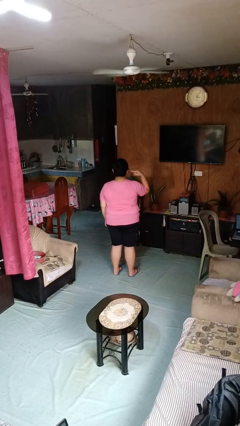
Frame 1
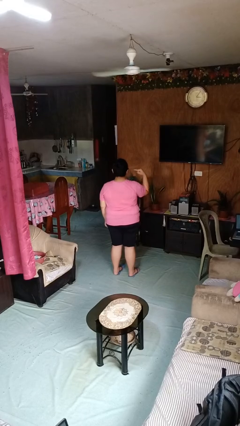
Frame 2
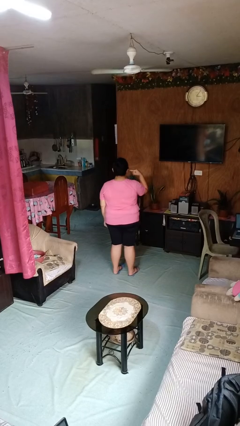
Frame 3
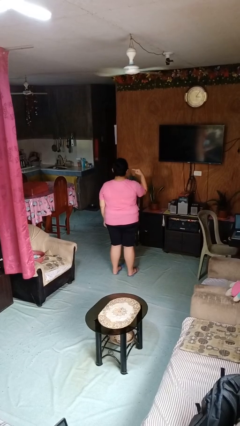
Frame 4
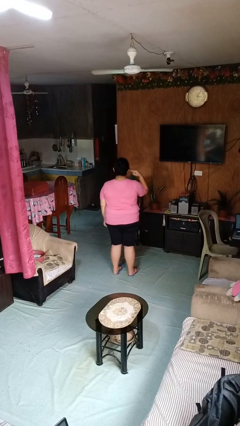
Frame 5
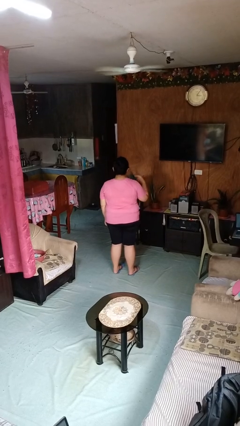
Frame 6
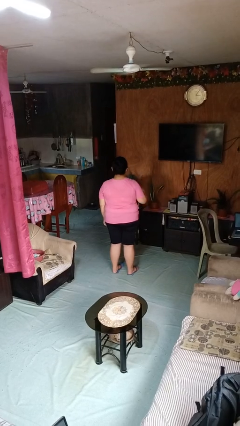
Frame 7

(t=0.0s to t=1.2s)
person gestures listen closely

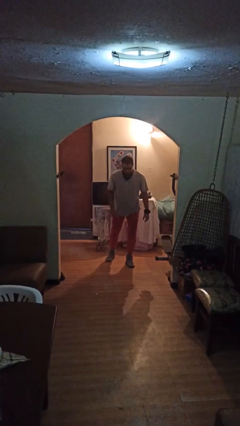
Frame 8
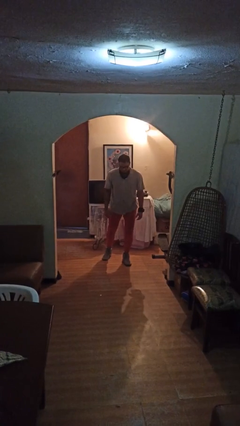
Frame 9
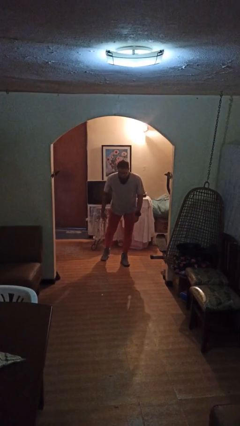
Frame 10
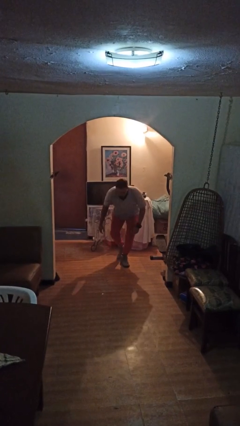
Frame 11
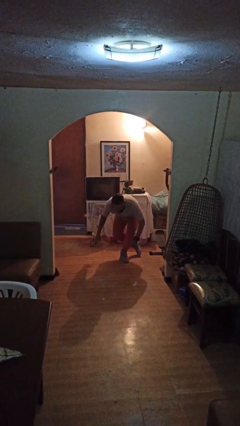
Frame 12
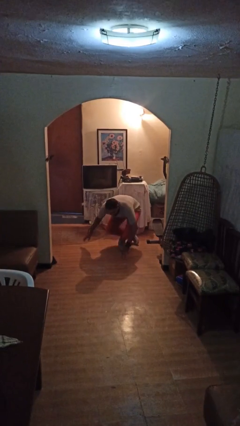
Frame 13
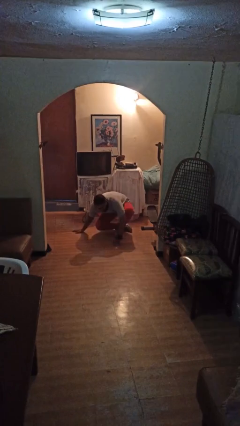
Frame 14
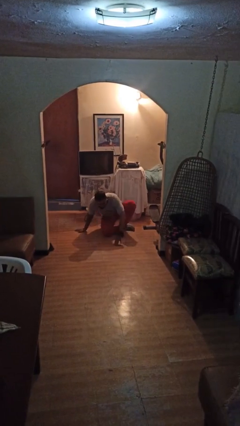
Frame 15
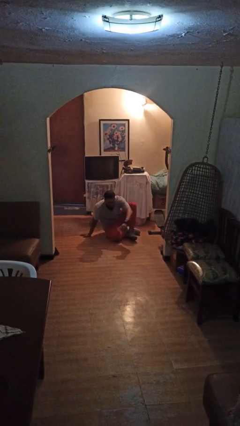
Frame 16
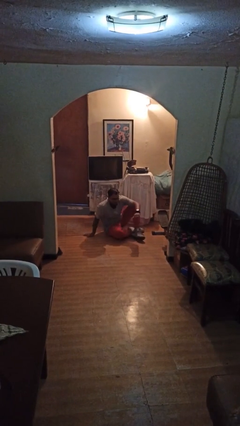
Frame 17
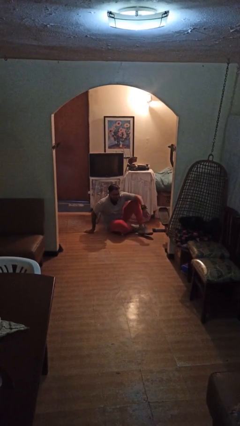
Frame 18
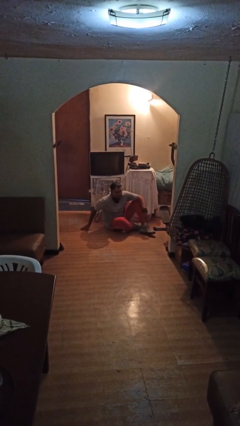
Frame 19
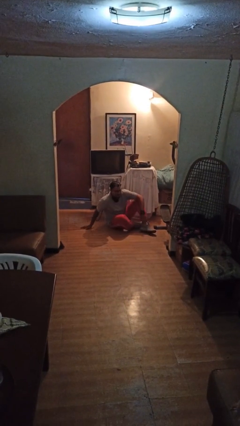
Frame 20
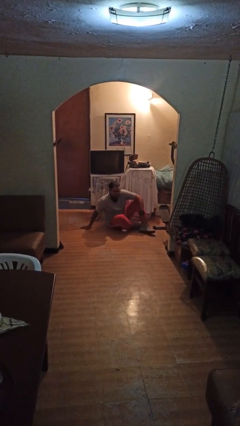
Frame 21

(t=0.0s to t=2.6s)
person sits down

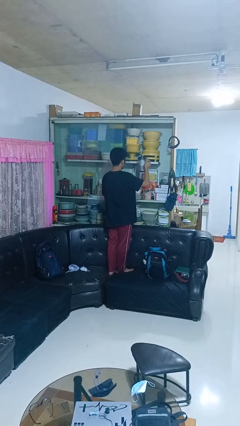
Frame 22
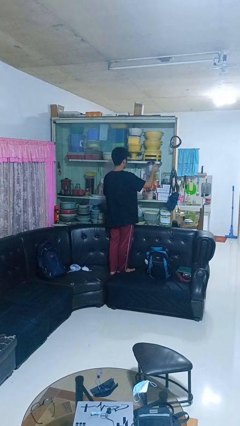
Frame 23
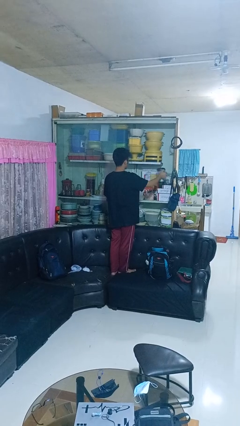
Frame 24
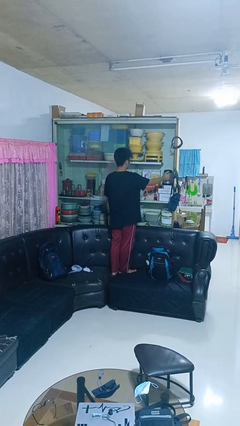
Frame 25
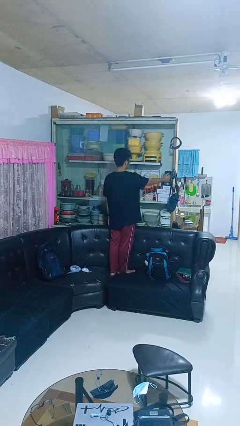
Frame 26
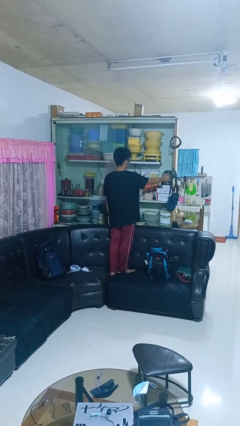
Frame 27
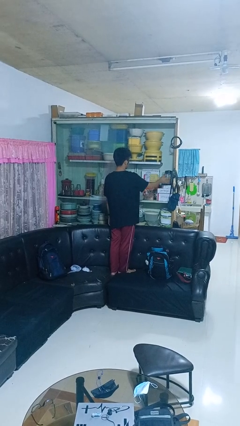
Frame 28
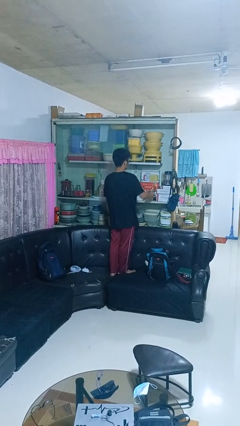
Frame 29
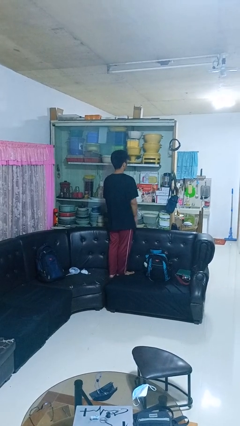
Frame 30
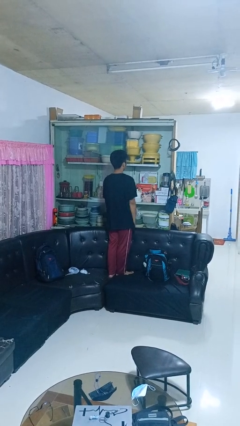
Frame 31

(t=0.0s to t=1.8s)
person puts down object into cabinet

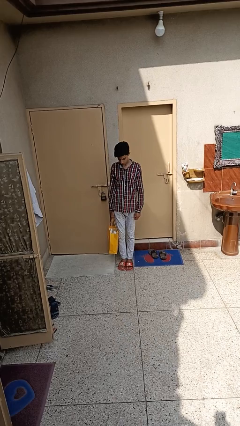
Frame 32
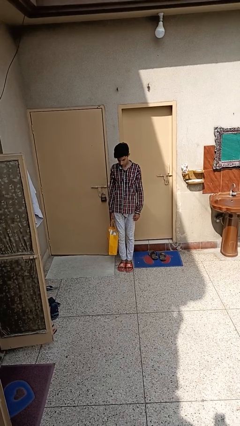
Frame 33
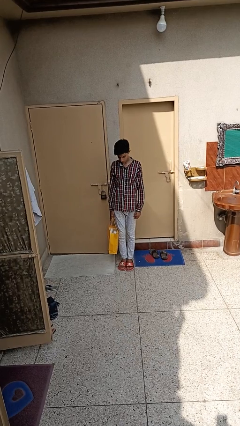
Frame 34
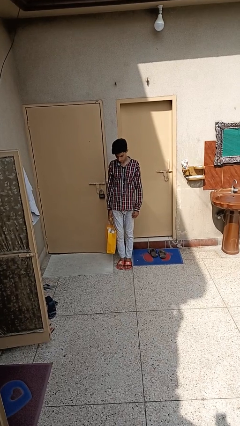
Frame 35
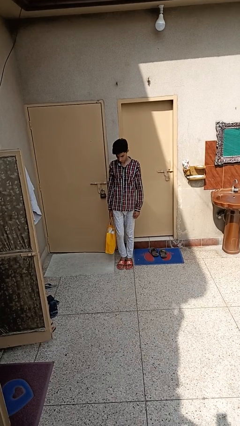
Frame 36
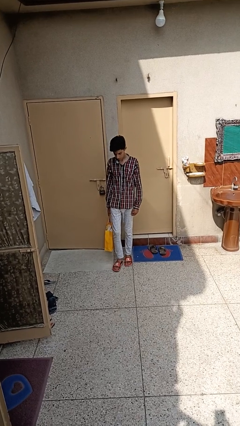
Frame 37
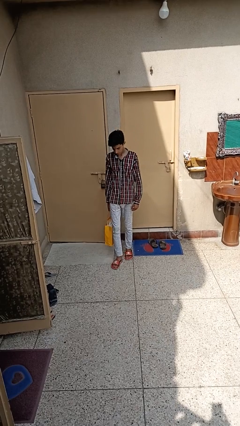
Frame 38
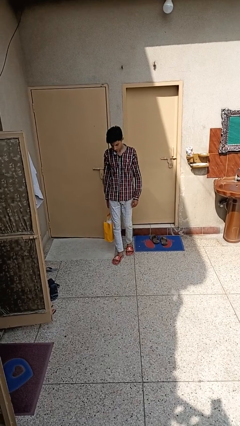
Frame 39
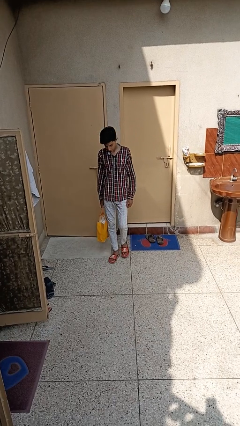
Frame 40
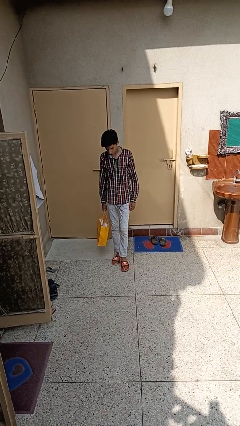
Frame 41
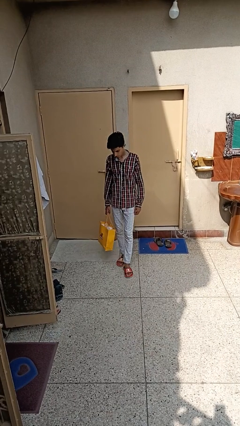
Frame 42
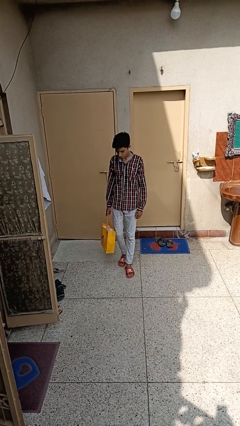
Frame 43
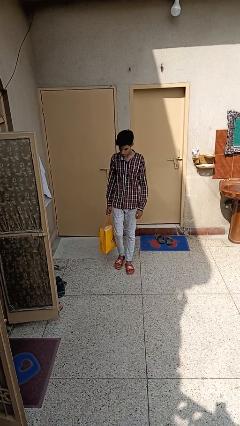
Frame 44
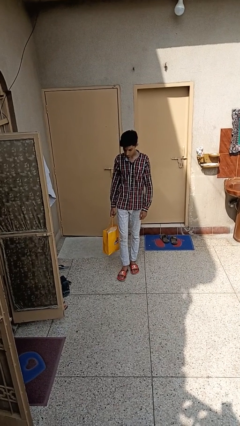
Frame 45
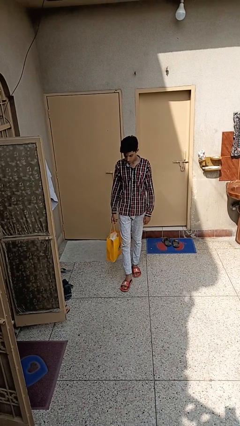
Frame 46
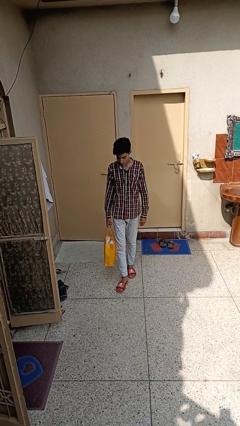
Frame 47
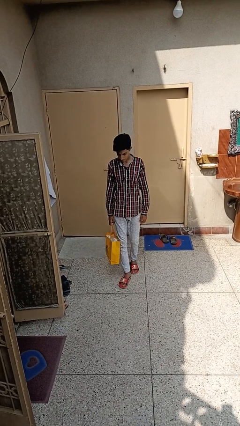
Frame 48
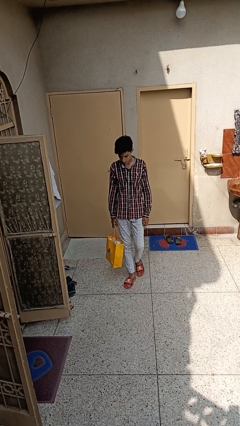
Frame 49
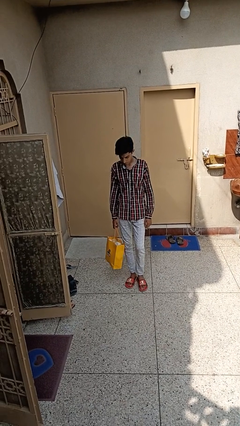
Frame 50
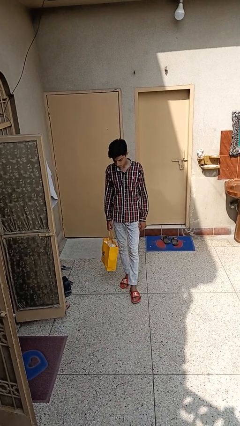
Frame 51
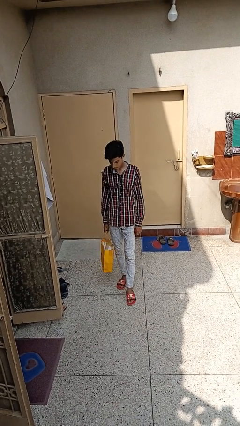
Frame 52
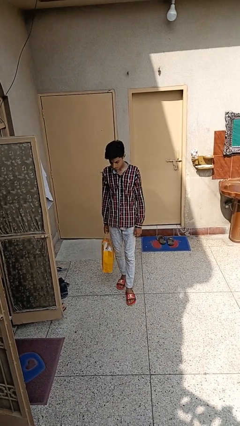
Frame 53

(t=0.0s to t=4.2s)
person carries groceries

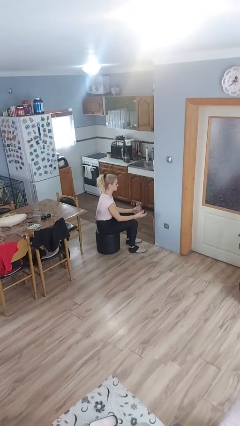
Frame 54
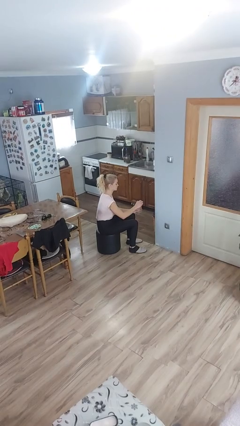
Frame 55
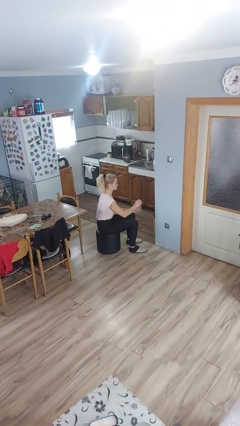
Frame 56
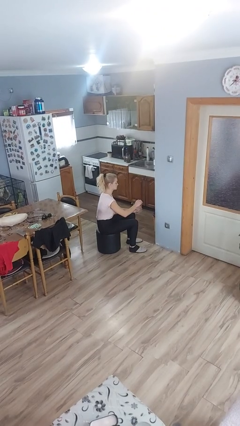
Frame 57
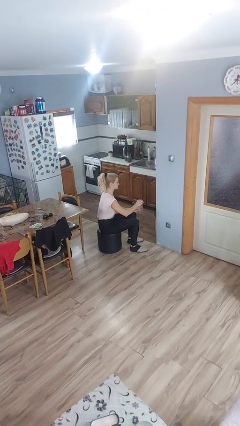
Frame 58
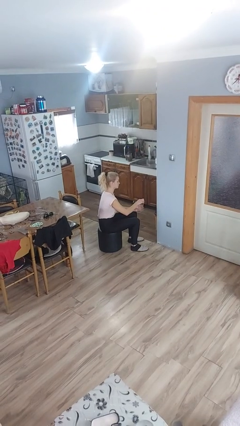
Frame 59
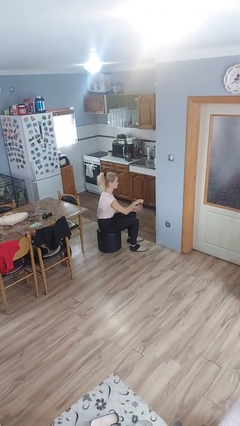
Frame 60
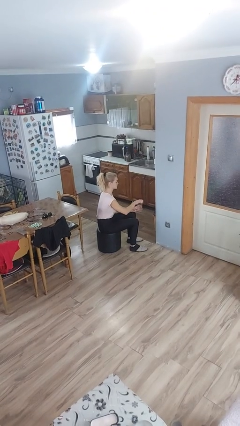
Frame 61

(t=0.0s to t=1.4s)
person closes jar

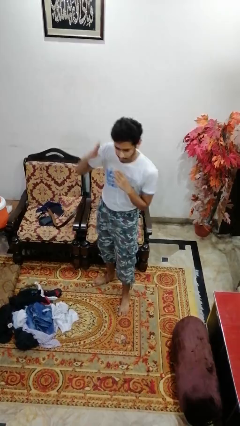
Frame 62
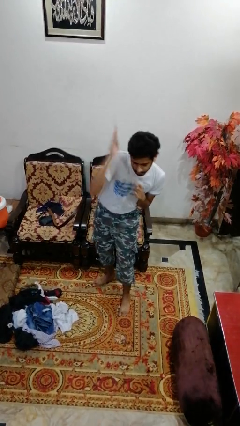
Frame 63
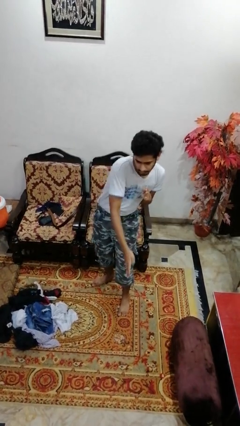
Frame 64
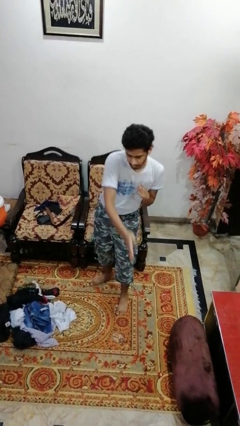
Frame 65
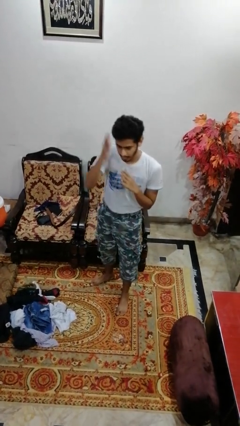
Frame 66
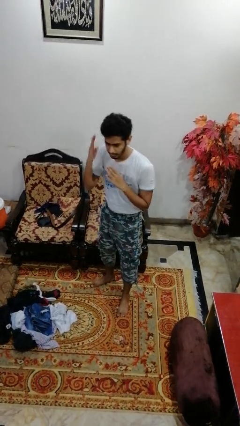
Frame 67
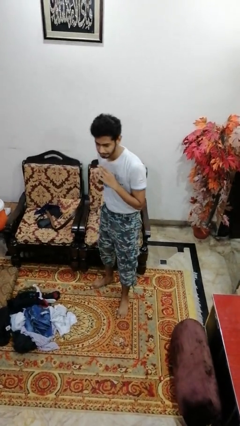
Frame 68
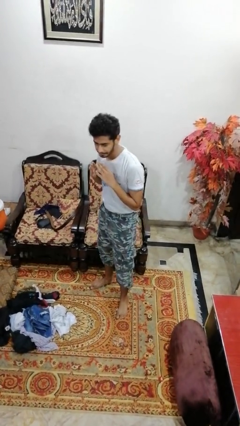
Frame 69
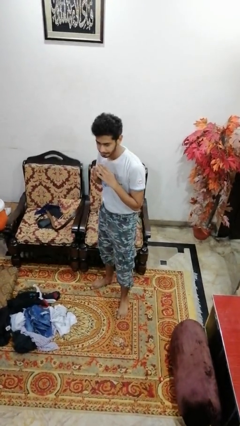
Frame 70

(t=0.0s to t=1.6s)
person karate chop

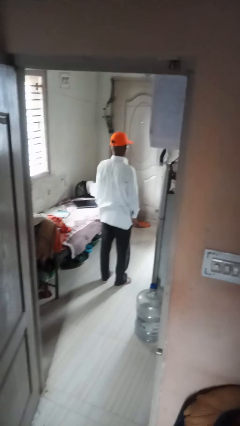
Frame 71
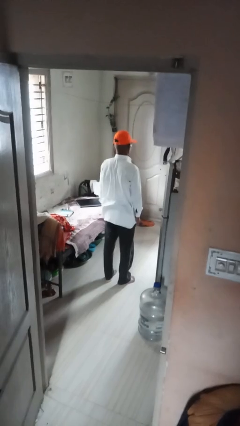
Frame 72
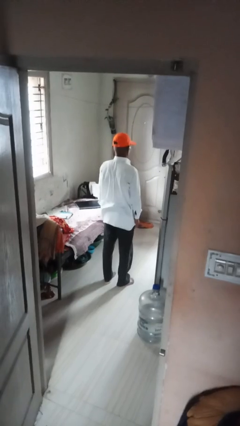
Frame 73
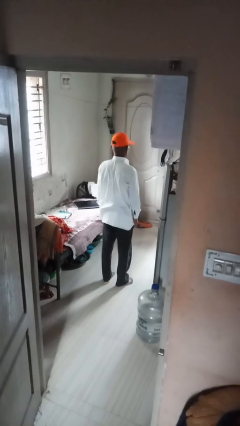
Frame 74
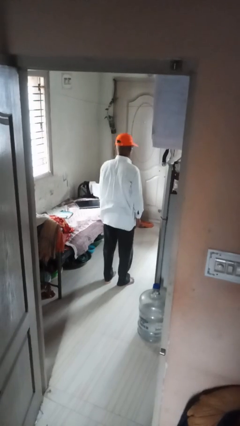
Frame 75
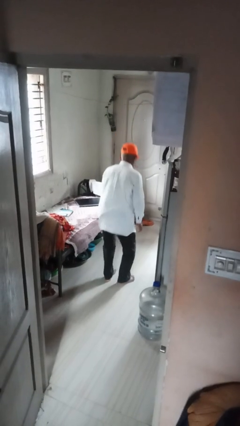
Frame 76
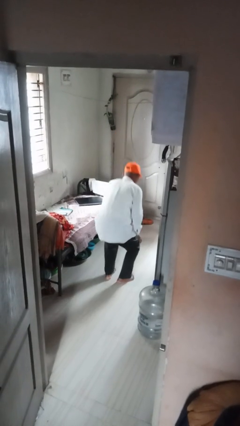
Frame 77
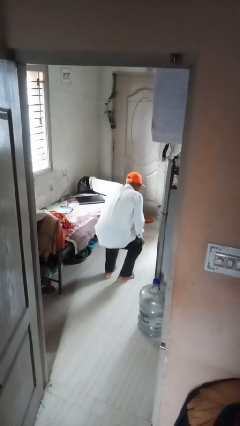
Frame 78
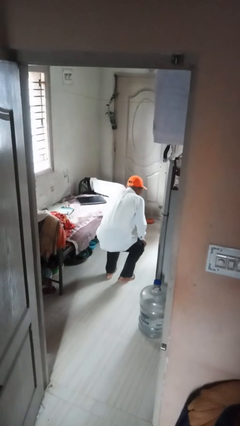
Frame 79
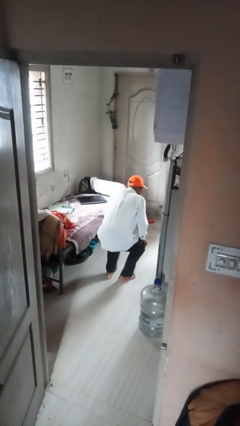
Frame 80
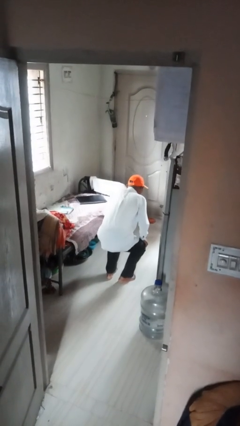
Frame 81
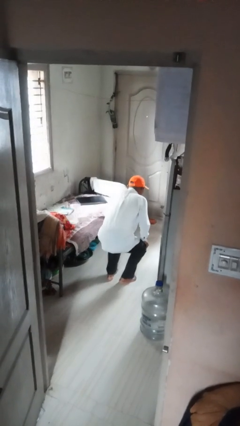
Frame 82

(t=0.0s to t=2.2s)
person squats

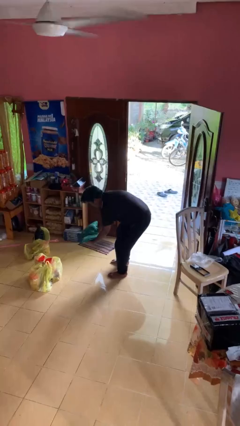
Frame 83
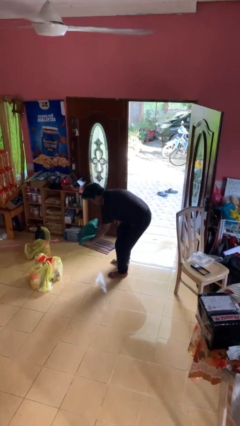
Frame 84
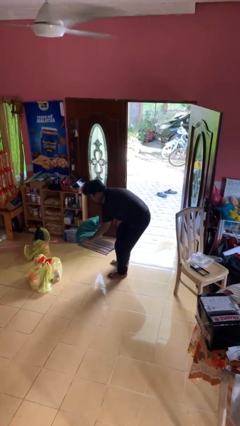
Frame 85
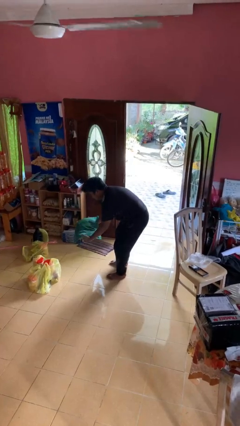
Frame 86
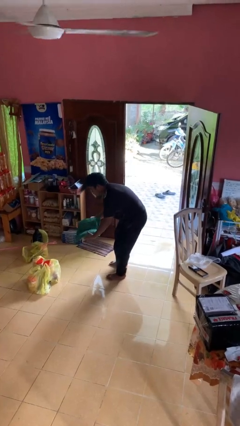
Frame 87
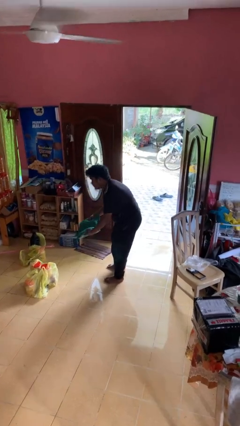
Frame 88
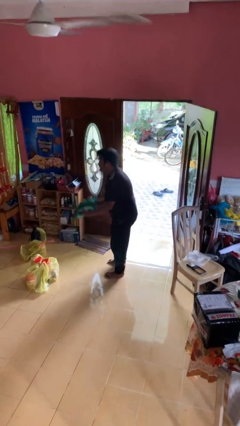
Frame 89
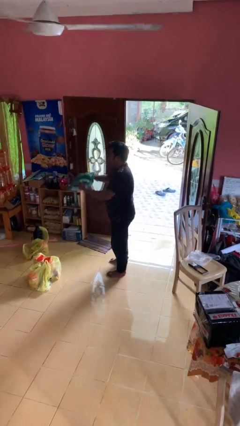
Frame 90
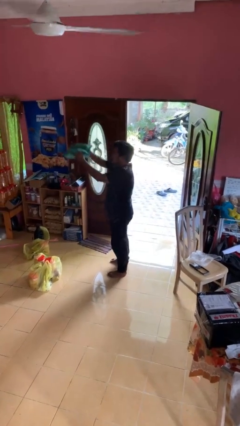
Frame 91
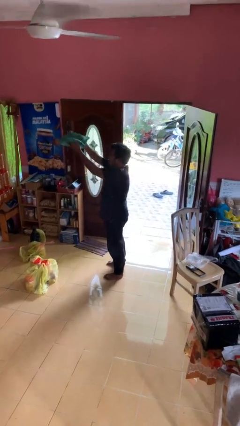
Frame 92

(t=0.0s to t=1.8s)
person catches dropped object
